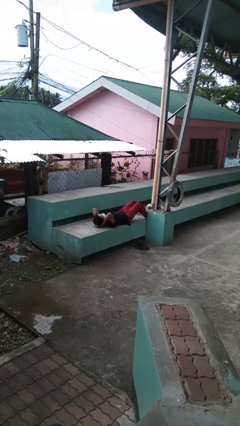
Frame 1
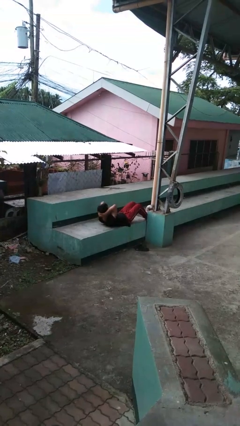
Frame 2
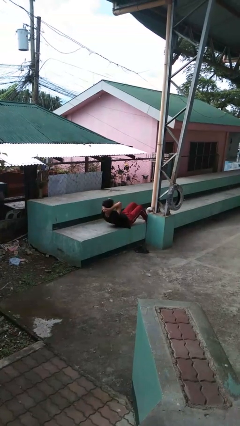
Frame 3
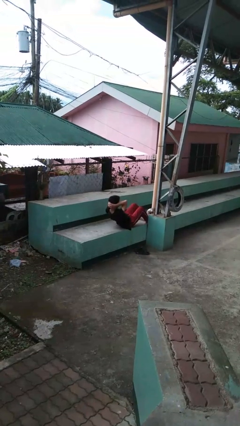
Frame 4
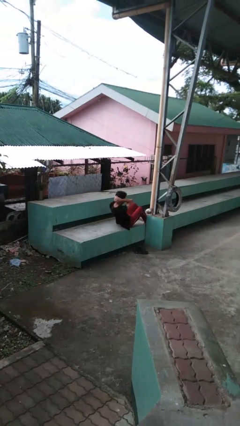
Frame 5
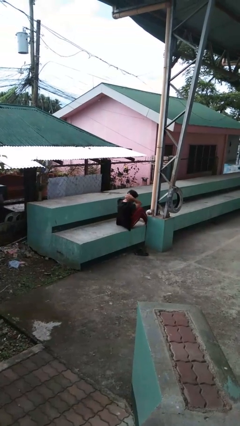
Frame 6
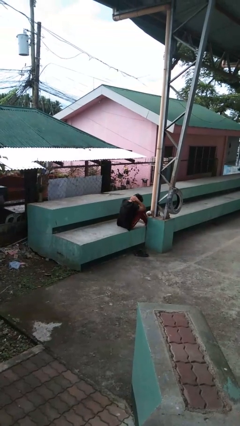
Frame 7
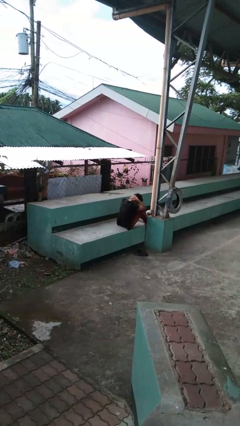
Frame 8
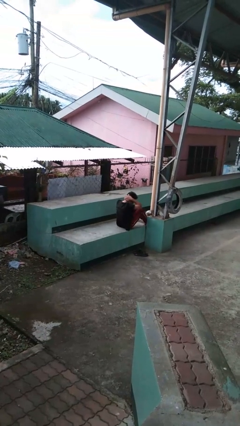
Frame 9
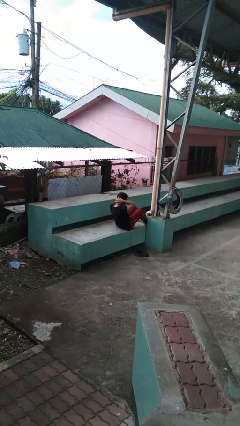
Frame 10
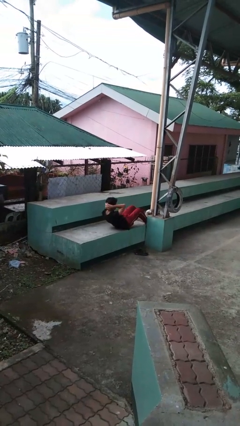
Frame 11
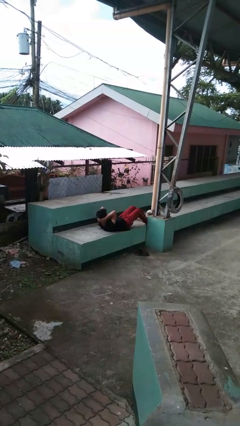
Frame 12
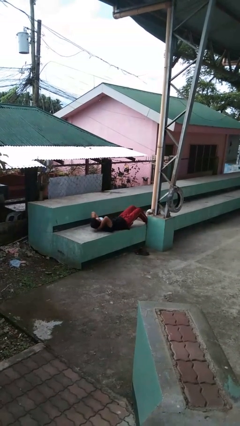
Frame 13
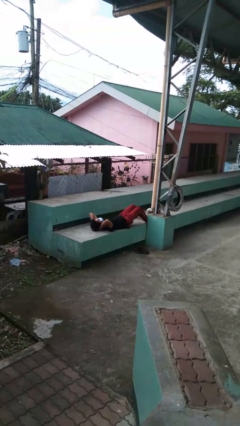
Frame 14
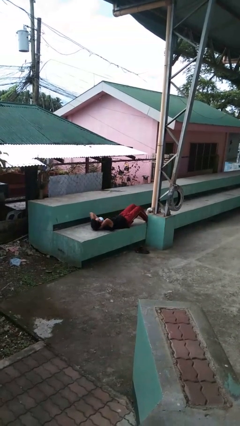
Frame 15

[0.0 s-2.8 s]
person exercises with situp

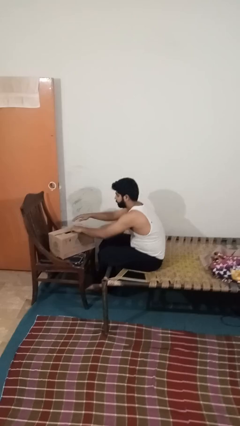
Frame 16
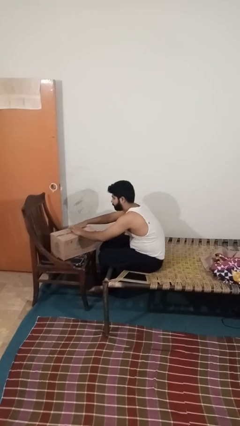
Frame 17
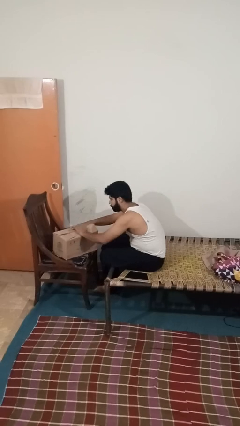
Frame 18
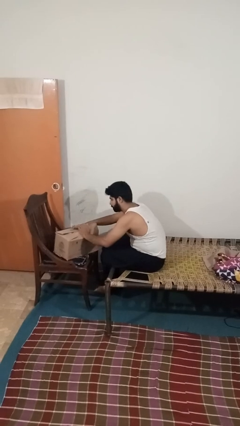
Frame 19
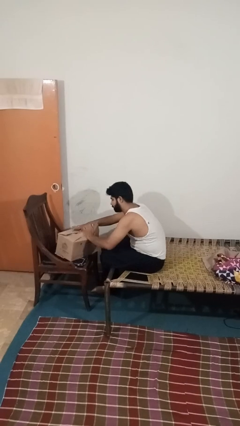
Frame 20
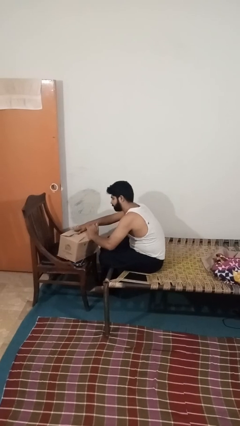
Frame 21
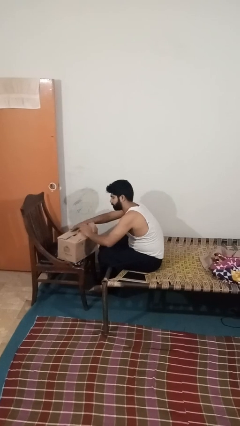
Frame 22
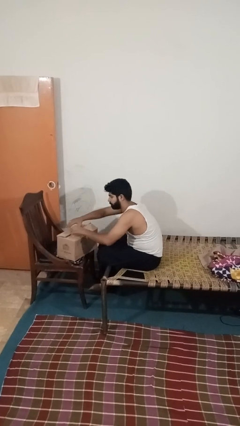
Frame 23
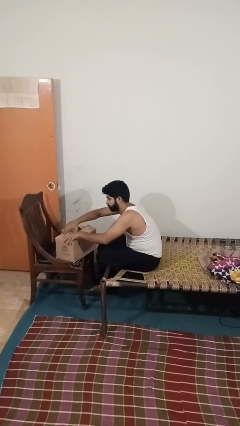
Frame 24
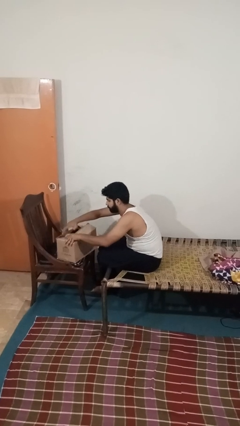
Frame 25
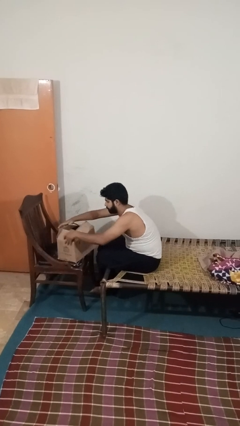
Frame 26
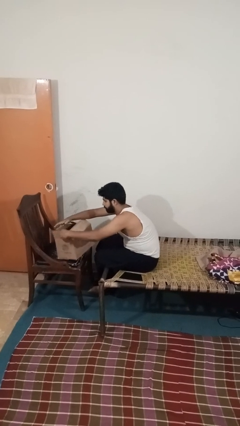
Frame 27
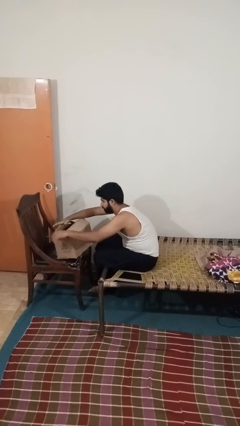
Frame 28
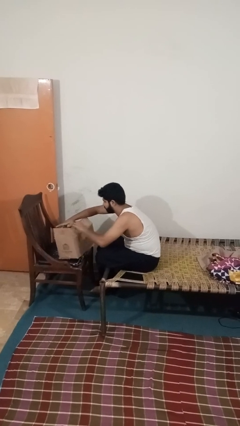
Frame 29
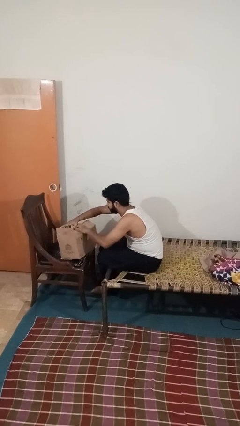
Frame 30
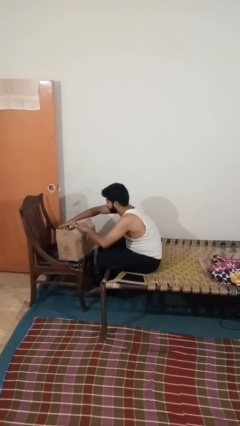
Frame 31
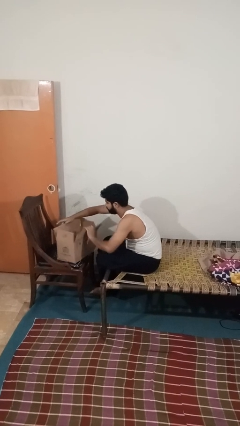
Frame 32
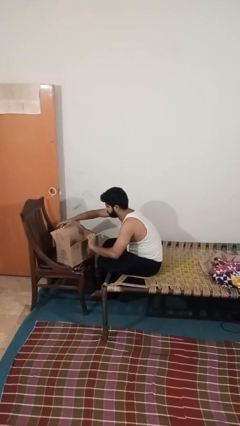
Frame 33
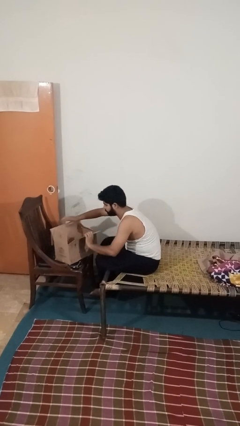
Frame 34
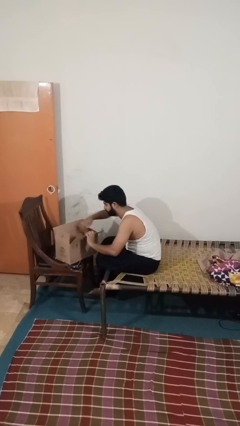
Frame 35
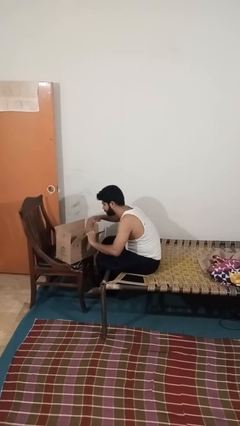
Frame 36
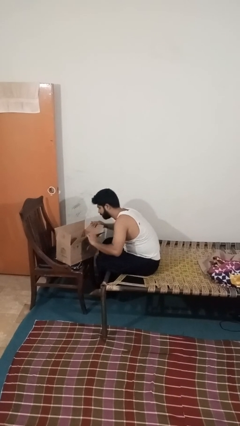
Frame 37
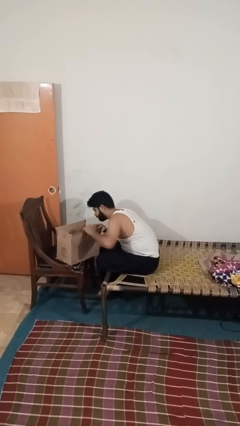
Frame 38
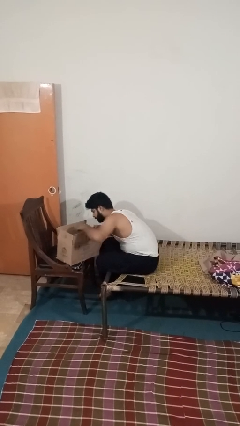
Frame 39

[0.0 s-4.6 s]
person opens box

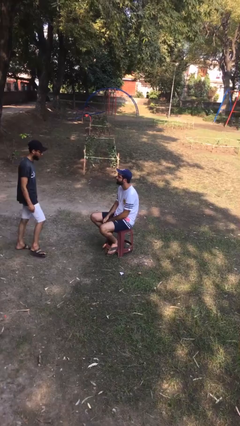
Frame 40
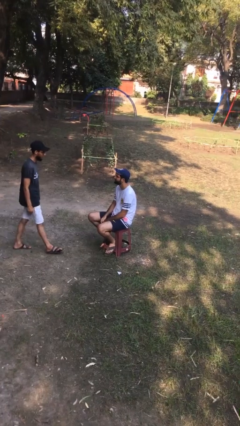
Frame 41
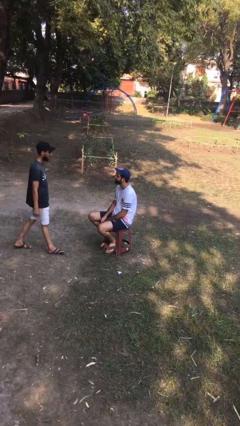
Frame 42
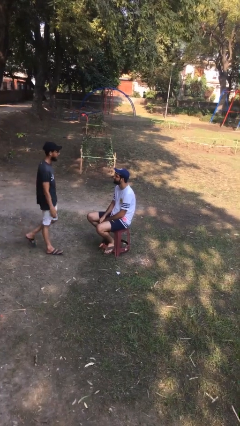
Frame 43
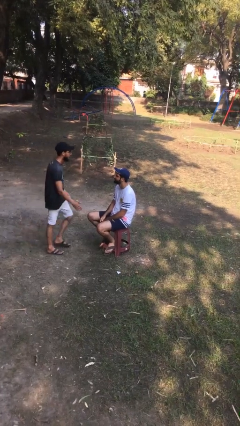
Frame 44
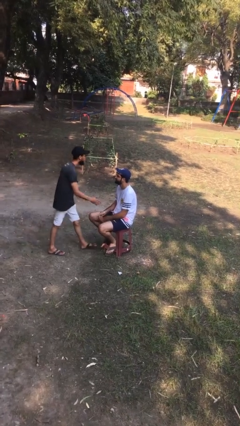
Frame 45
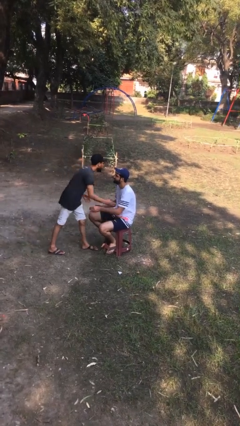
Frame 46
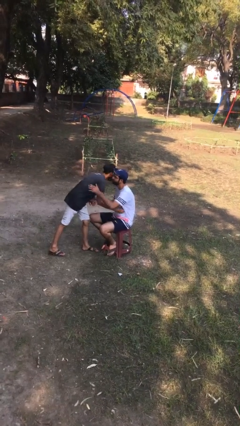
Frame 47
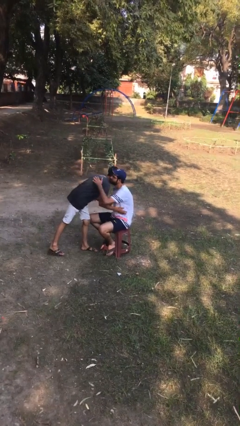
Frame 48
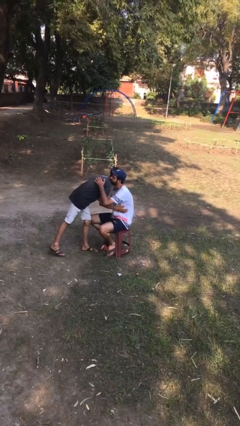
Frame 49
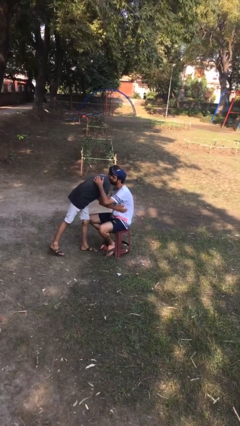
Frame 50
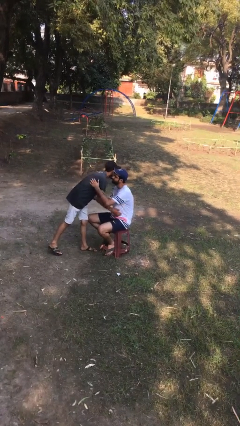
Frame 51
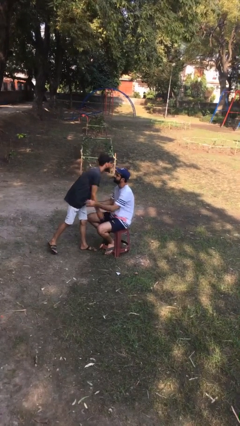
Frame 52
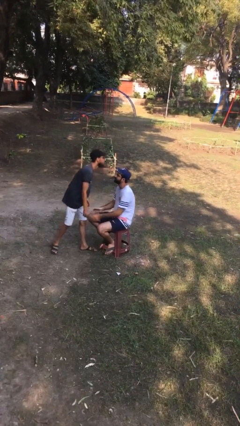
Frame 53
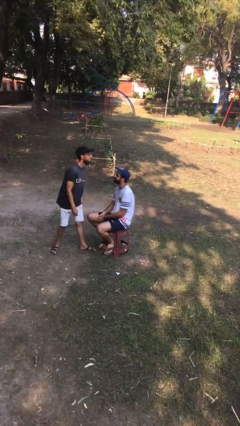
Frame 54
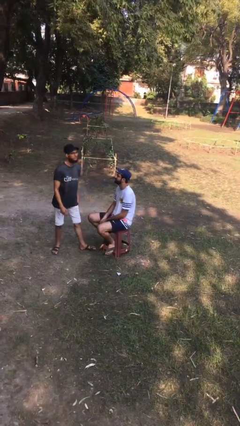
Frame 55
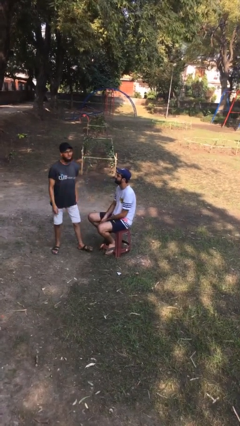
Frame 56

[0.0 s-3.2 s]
person embraces person

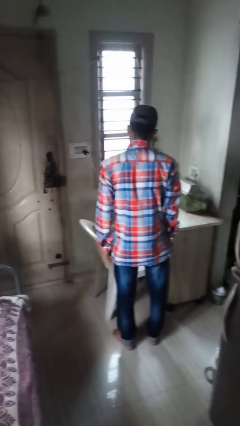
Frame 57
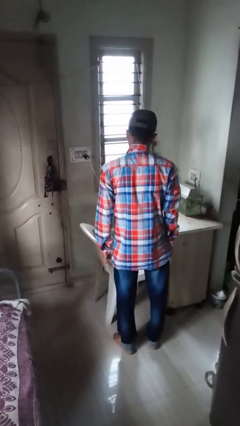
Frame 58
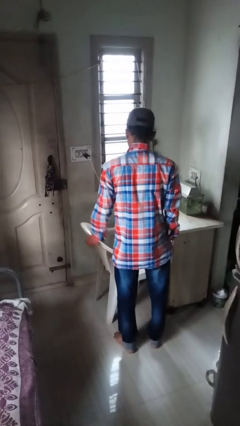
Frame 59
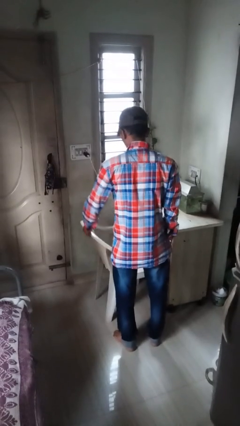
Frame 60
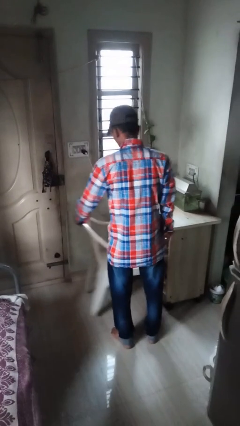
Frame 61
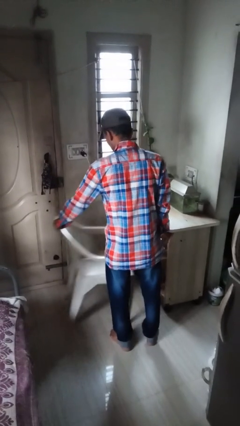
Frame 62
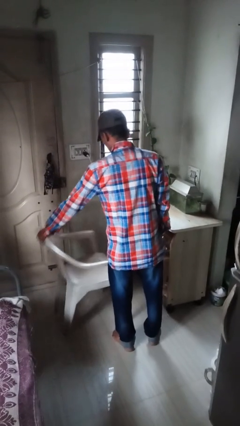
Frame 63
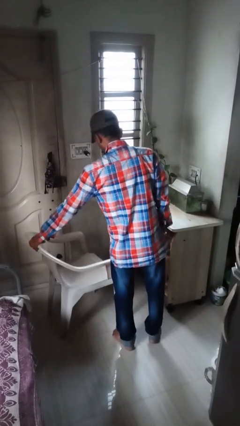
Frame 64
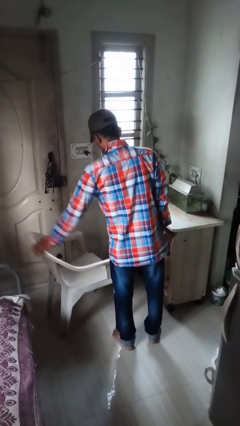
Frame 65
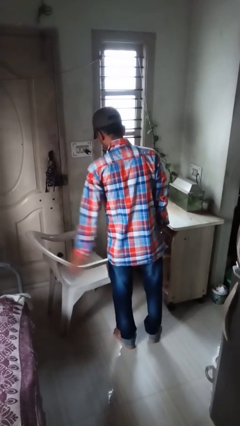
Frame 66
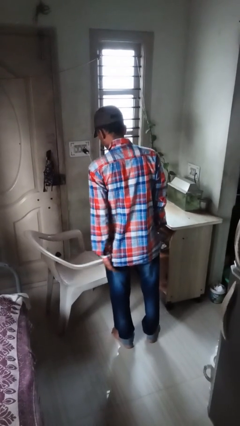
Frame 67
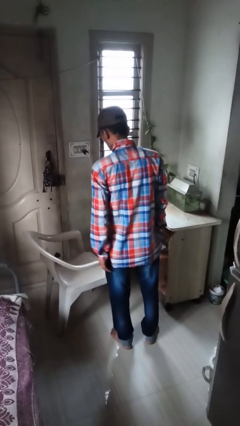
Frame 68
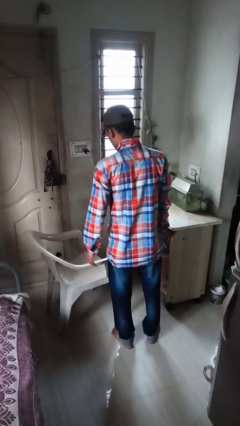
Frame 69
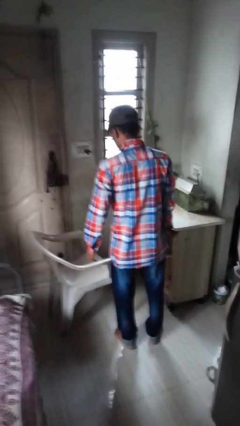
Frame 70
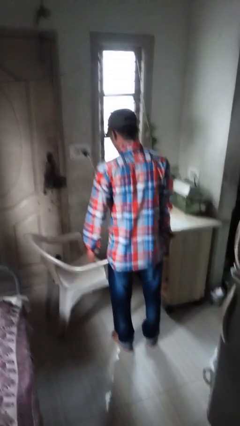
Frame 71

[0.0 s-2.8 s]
person pulls out chair

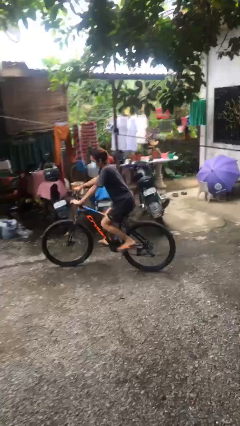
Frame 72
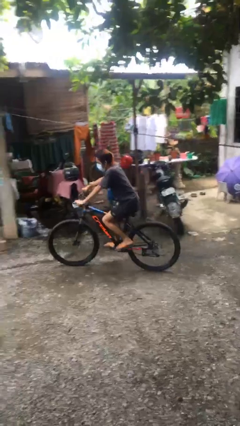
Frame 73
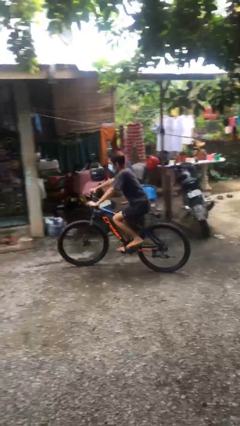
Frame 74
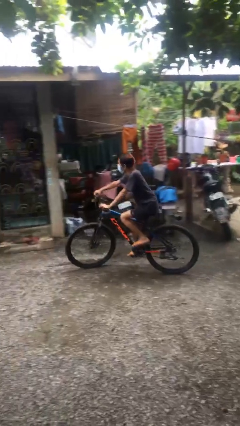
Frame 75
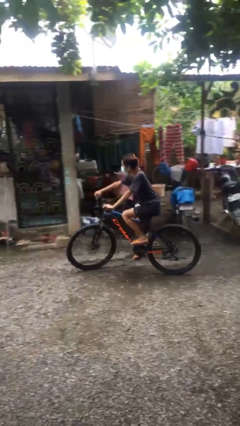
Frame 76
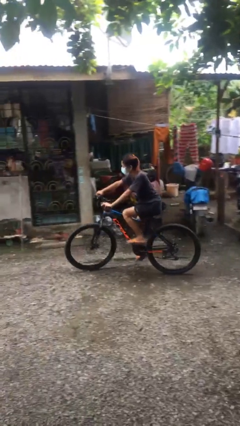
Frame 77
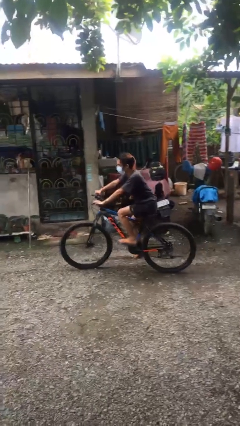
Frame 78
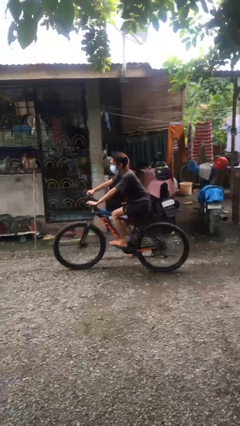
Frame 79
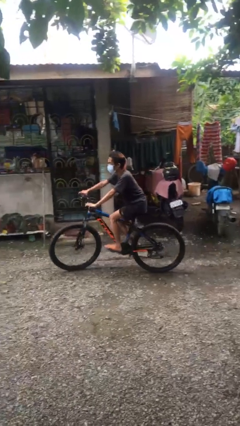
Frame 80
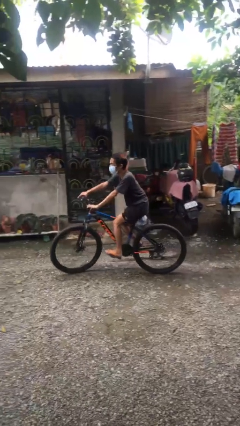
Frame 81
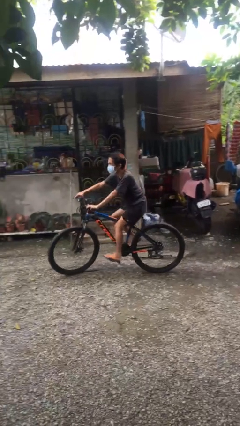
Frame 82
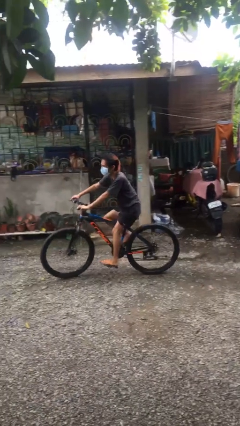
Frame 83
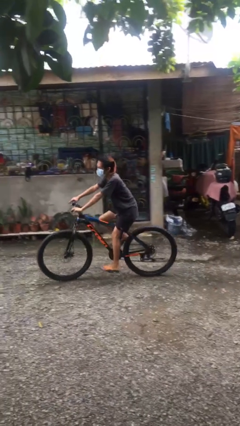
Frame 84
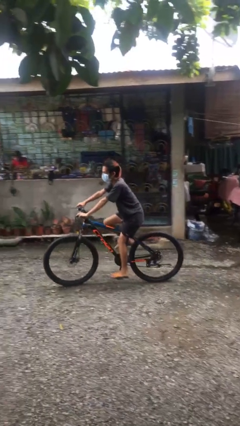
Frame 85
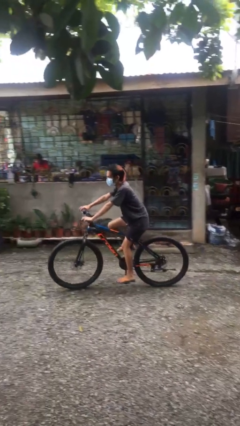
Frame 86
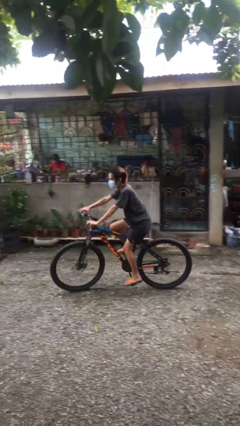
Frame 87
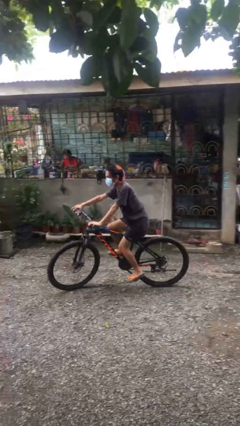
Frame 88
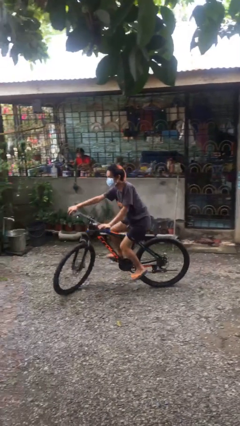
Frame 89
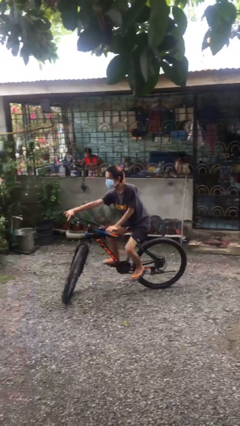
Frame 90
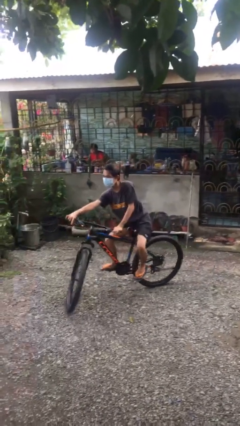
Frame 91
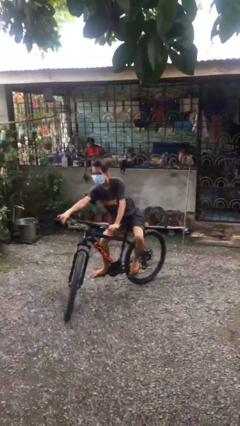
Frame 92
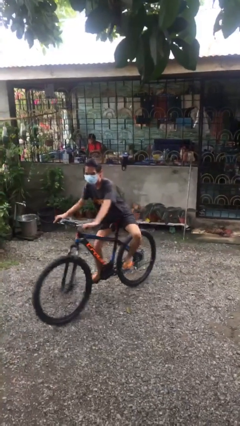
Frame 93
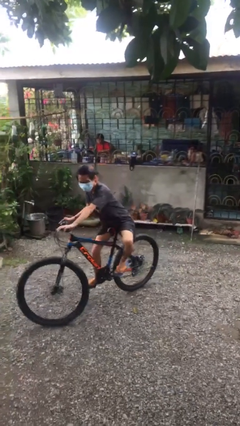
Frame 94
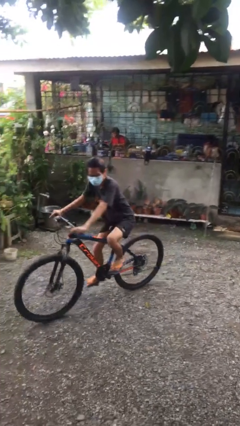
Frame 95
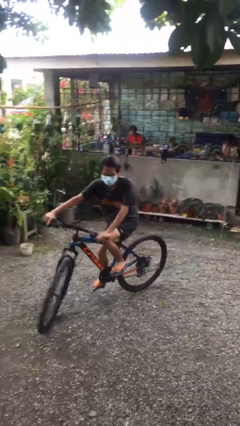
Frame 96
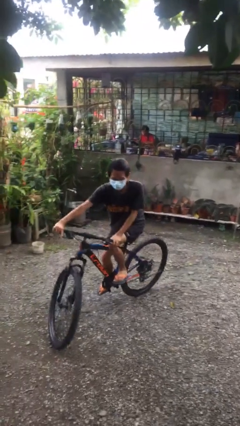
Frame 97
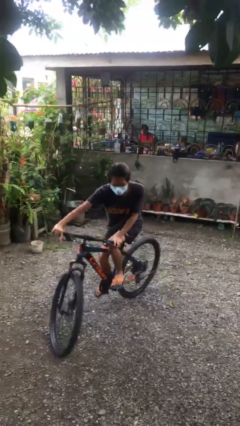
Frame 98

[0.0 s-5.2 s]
person rides bicycle
